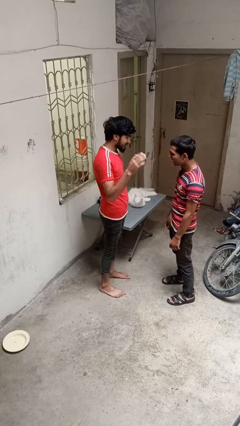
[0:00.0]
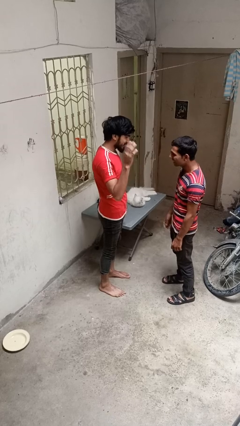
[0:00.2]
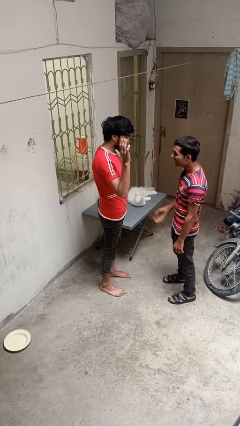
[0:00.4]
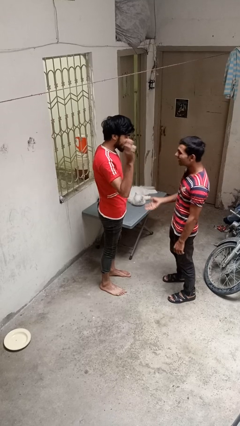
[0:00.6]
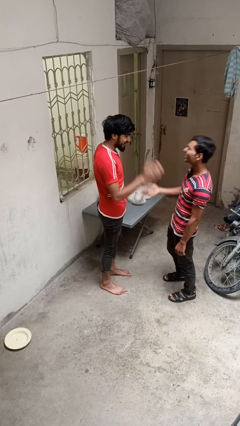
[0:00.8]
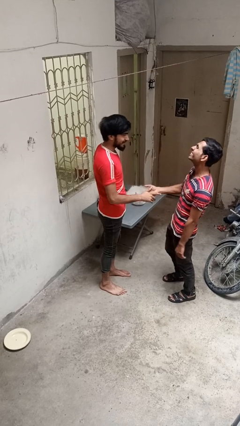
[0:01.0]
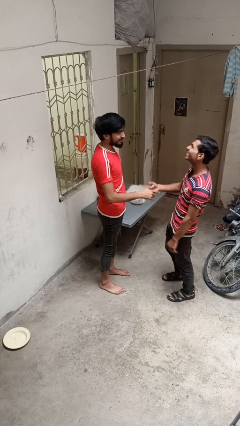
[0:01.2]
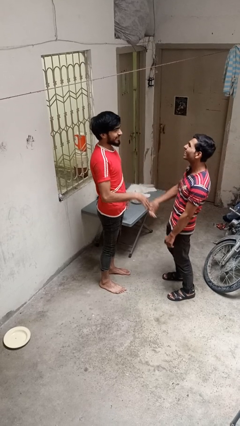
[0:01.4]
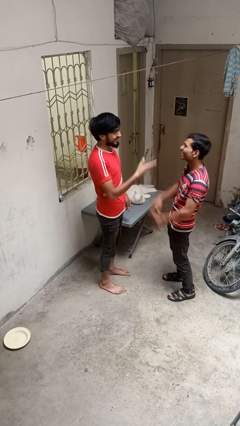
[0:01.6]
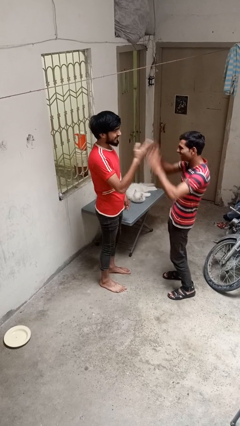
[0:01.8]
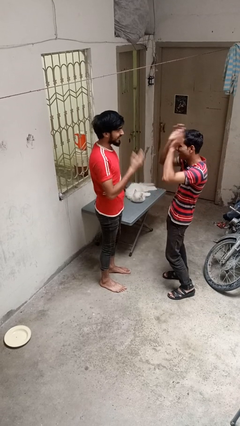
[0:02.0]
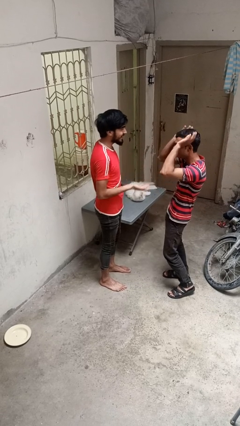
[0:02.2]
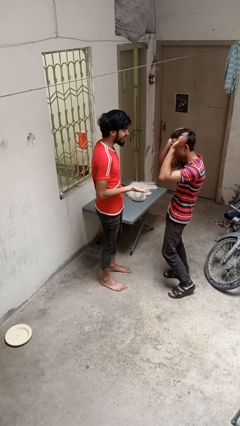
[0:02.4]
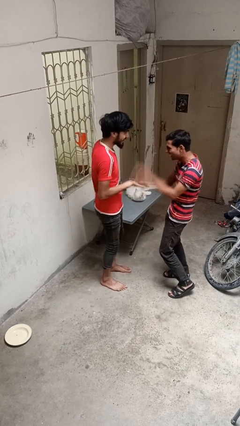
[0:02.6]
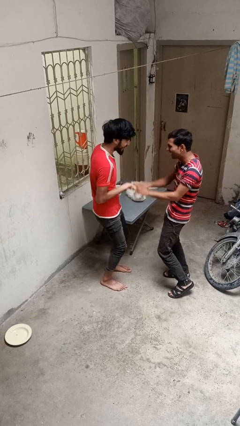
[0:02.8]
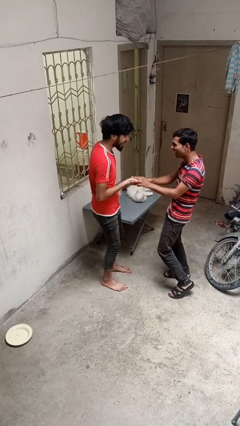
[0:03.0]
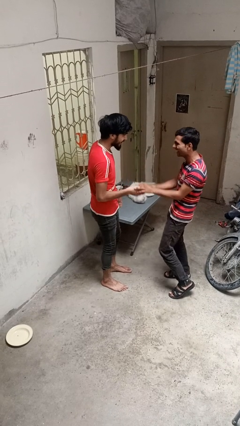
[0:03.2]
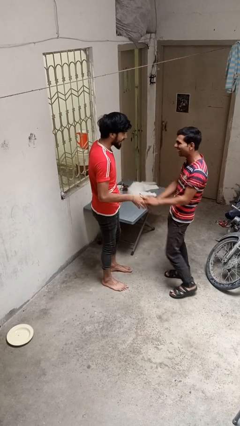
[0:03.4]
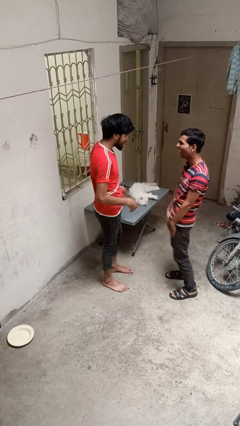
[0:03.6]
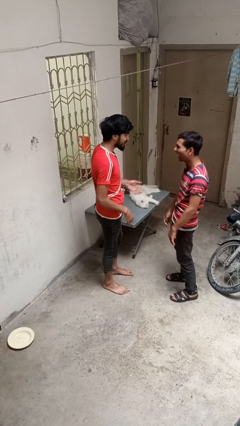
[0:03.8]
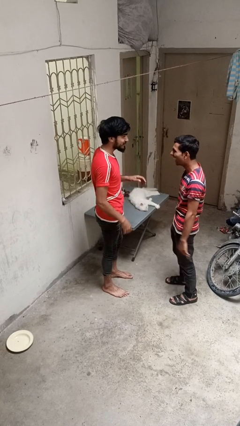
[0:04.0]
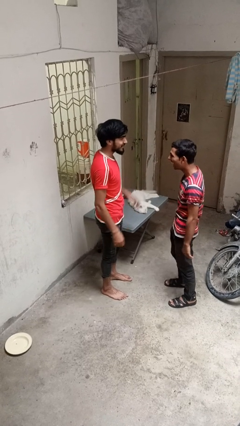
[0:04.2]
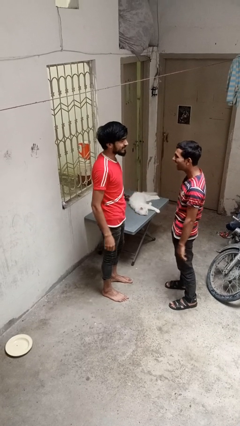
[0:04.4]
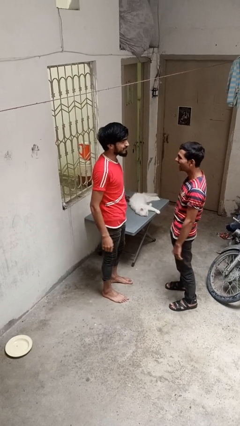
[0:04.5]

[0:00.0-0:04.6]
person laughs with person

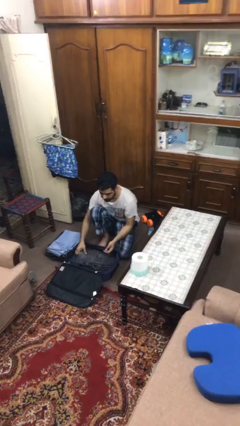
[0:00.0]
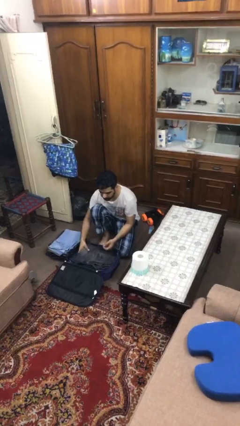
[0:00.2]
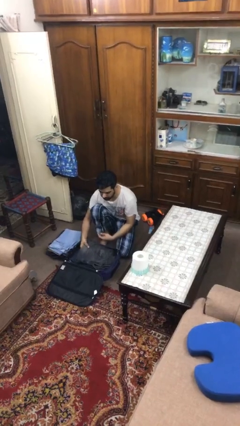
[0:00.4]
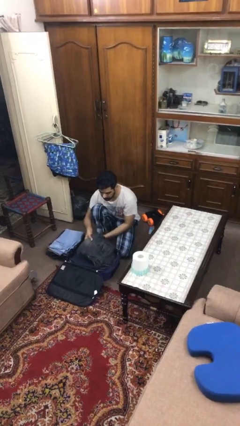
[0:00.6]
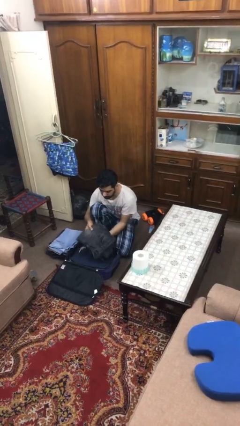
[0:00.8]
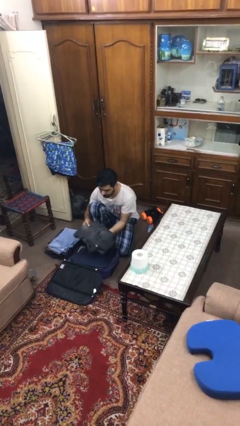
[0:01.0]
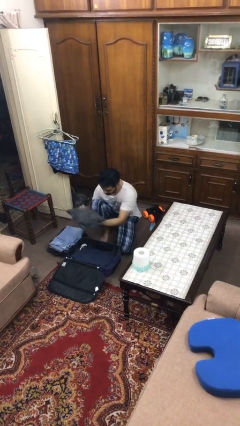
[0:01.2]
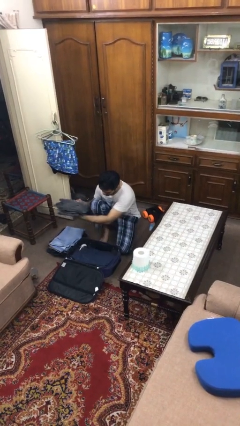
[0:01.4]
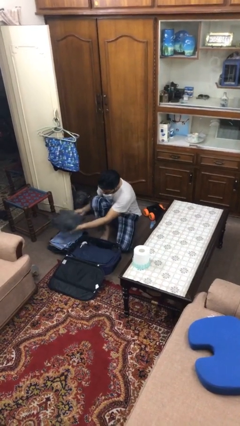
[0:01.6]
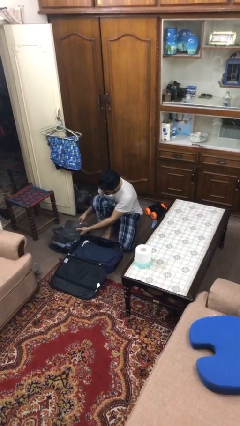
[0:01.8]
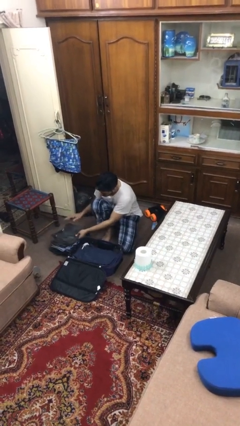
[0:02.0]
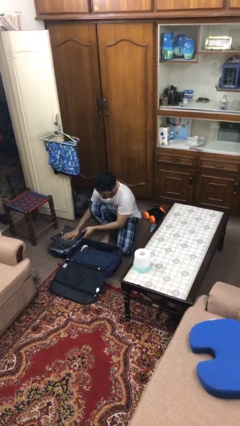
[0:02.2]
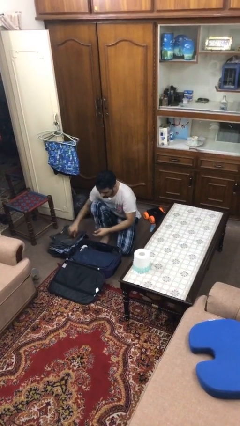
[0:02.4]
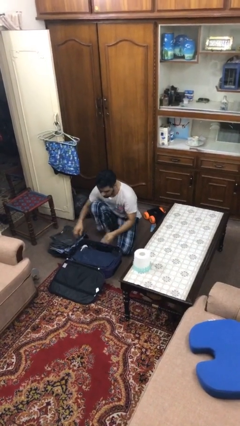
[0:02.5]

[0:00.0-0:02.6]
person unloads clothes from suitcase

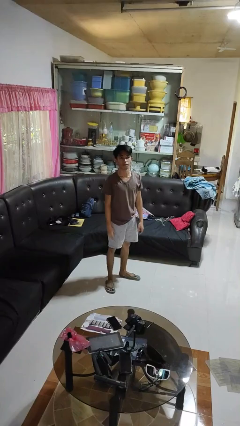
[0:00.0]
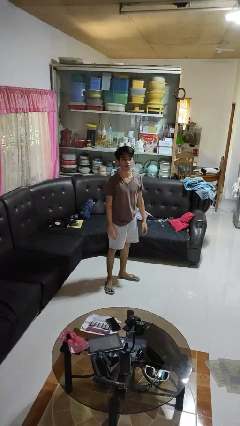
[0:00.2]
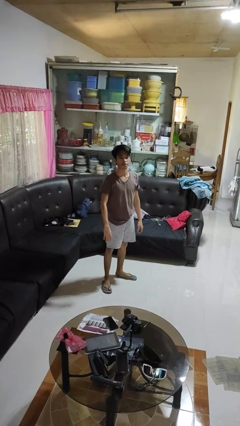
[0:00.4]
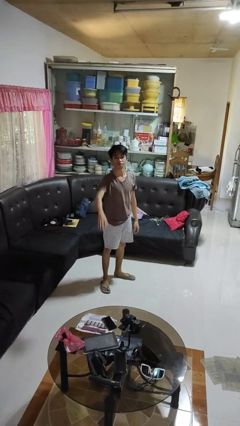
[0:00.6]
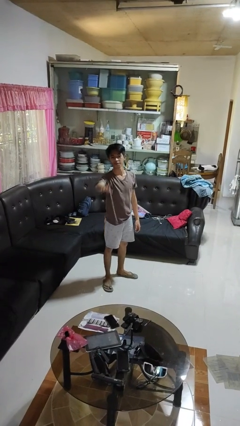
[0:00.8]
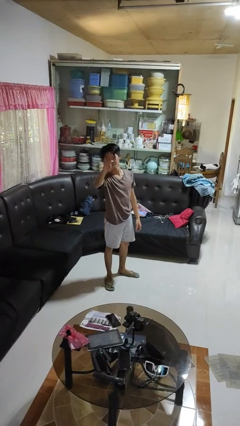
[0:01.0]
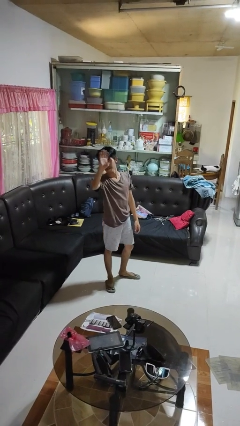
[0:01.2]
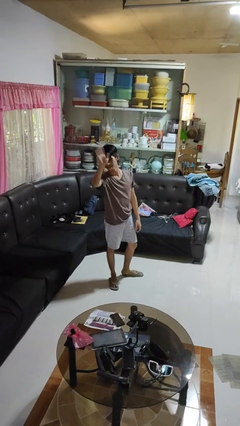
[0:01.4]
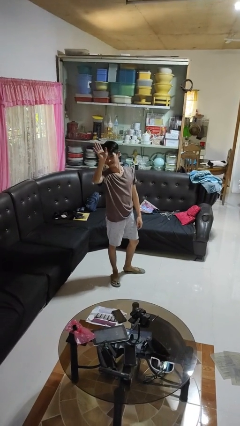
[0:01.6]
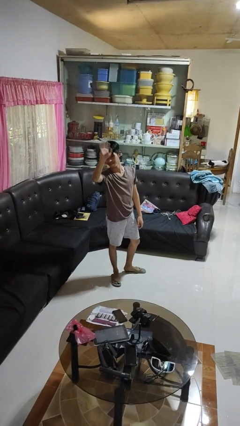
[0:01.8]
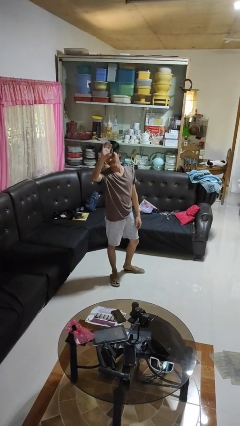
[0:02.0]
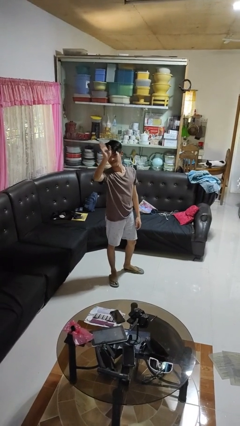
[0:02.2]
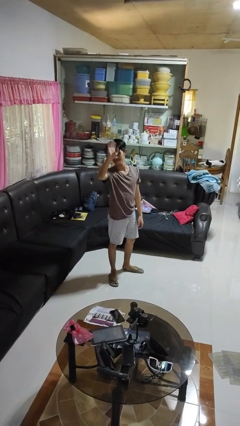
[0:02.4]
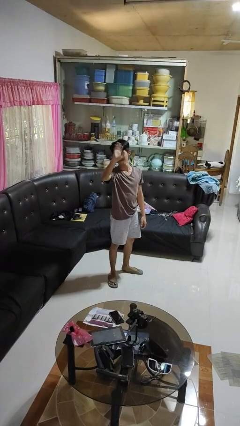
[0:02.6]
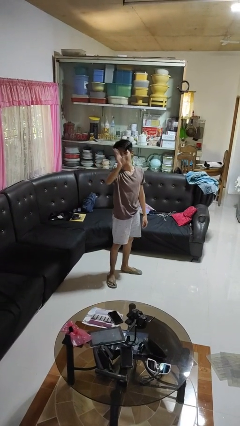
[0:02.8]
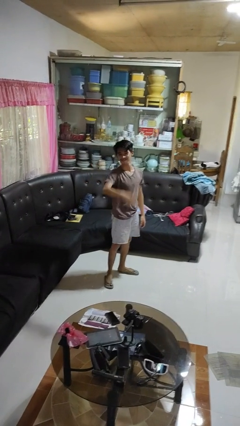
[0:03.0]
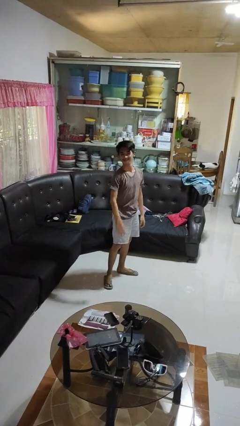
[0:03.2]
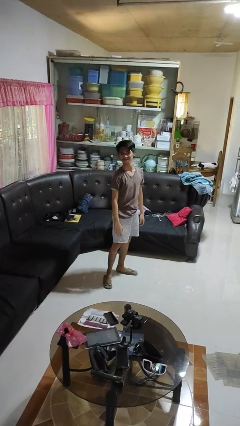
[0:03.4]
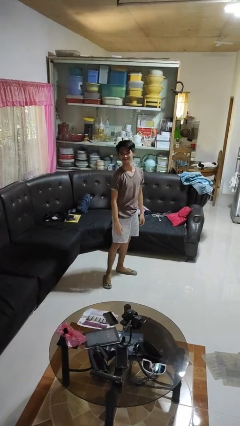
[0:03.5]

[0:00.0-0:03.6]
person waves at person

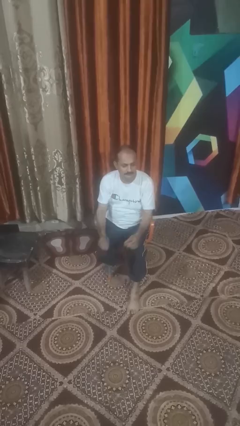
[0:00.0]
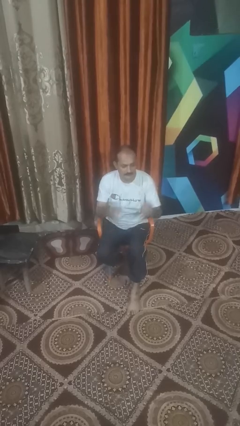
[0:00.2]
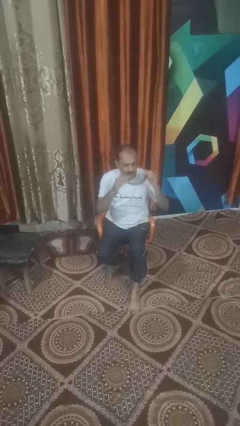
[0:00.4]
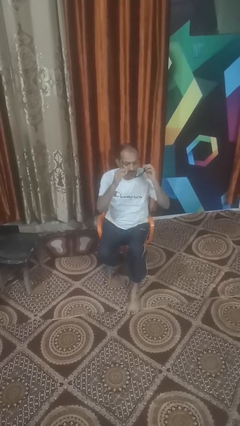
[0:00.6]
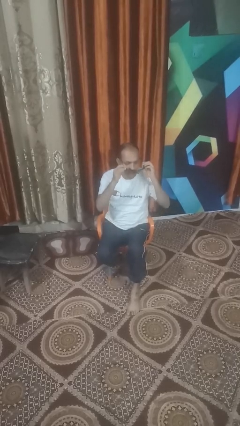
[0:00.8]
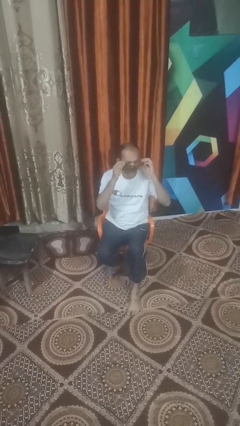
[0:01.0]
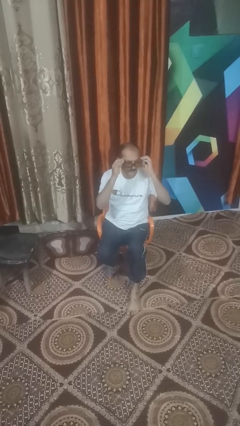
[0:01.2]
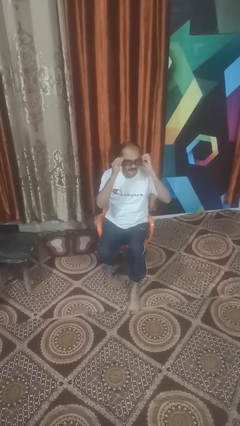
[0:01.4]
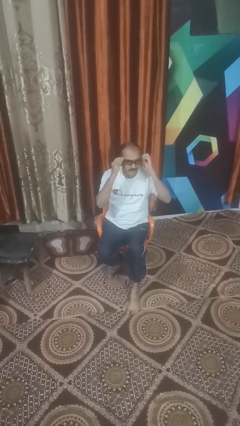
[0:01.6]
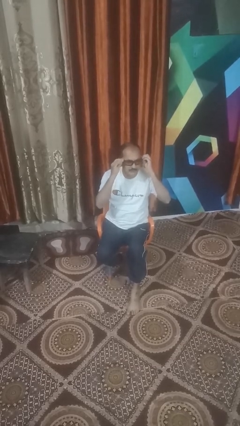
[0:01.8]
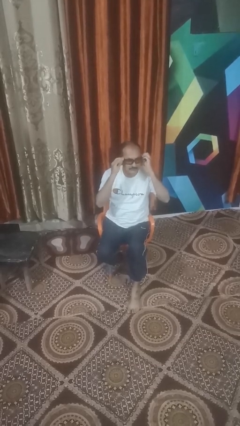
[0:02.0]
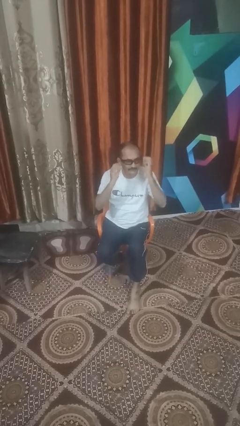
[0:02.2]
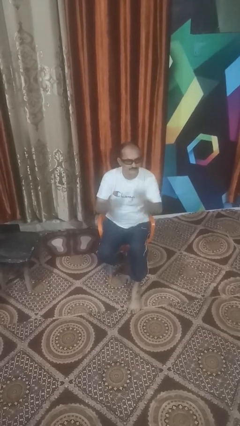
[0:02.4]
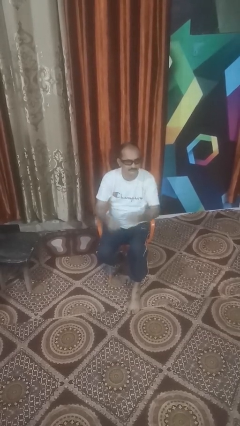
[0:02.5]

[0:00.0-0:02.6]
person puts on sunglasses

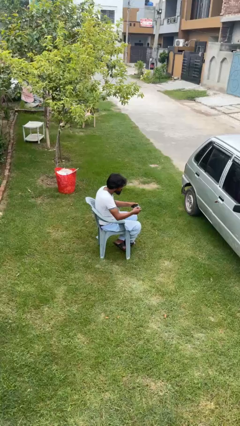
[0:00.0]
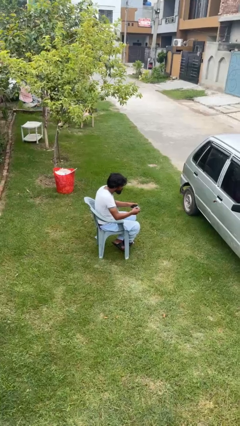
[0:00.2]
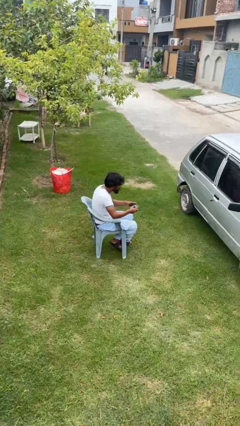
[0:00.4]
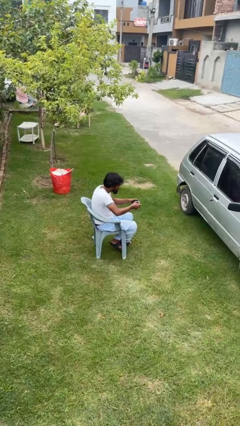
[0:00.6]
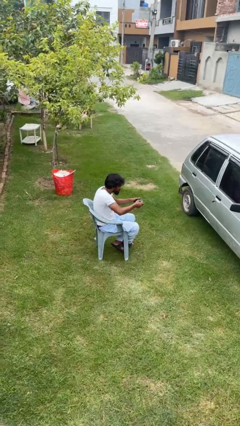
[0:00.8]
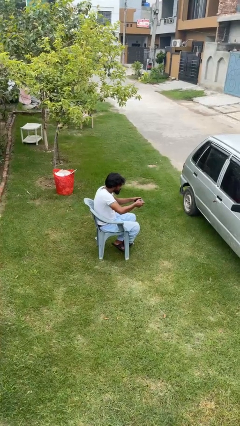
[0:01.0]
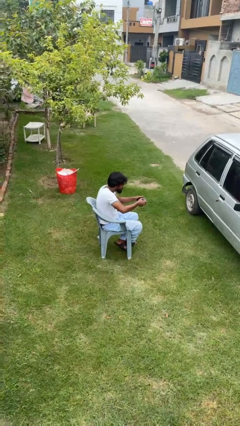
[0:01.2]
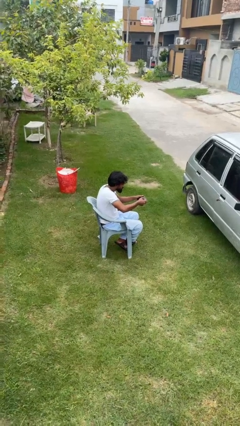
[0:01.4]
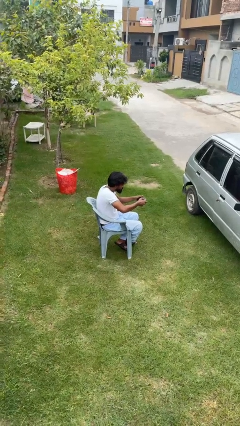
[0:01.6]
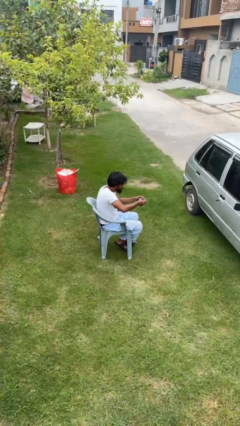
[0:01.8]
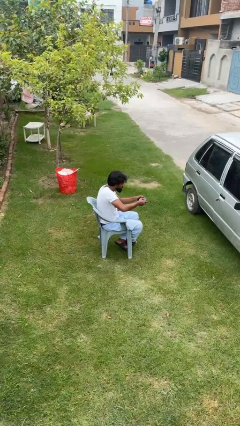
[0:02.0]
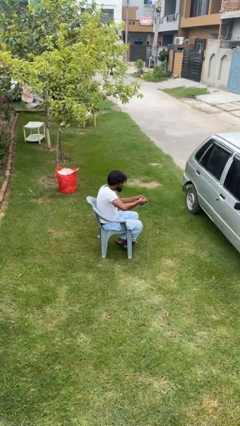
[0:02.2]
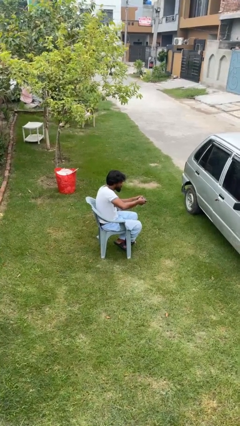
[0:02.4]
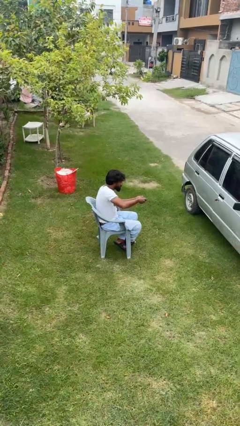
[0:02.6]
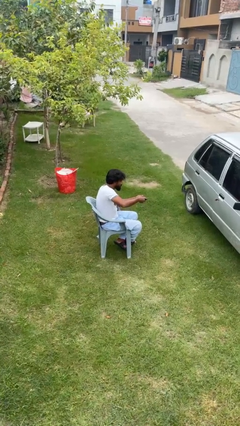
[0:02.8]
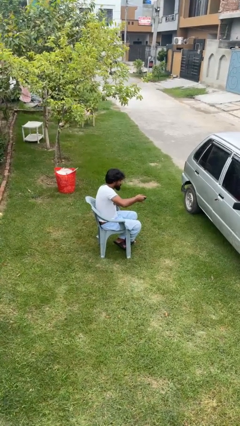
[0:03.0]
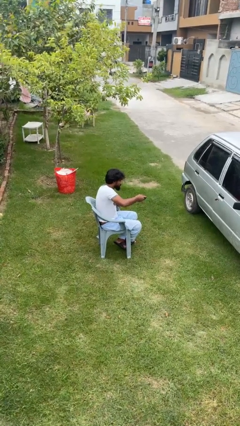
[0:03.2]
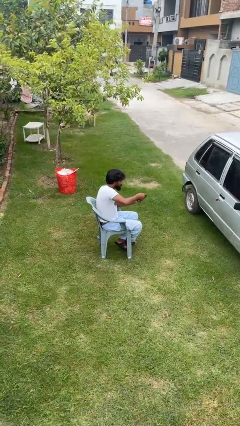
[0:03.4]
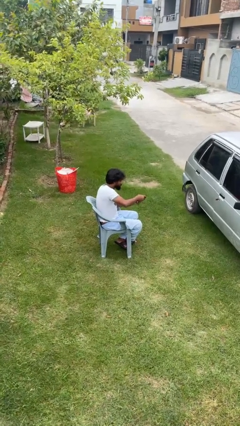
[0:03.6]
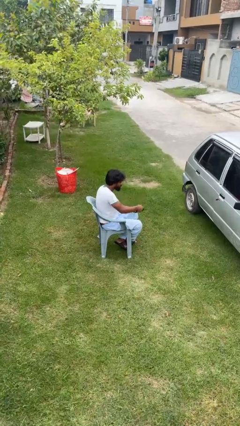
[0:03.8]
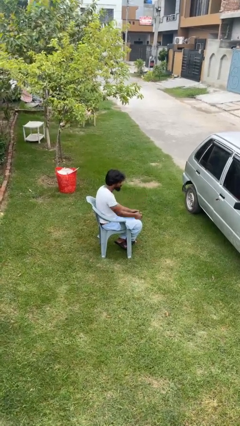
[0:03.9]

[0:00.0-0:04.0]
person interacts with handheld game

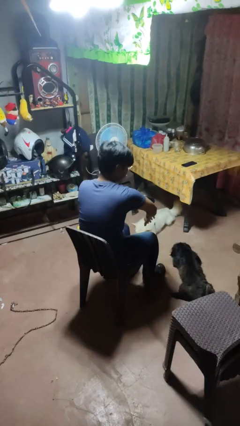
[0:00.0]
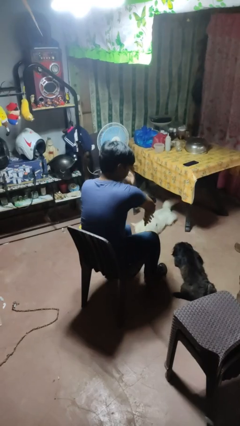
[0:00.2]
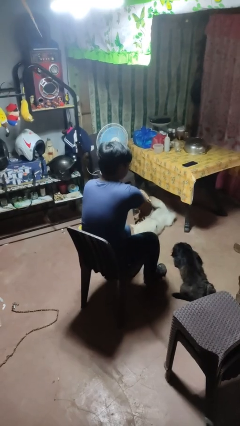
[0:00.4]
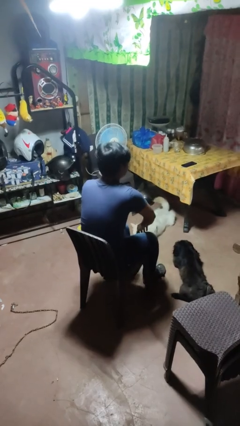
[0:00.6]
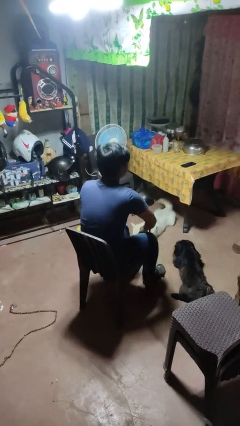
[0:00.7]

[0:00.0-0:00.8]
person swats bug
